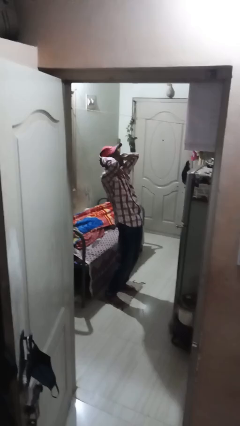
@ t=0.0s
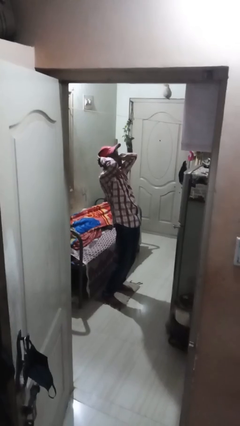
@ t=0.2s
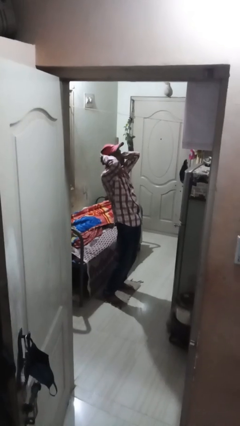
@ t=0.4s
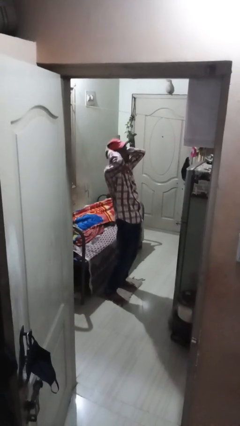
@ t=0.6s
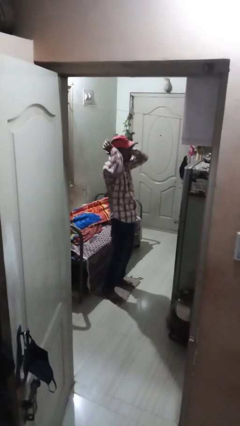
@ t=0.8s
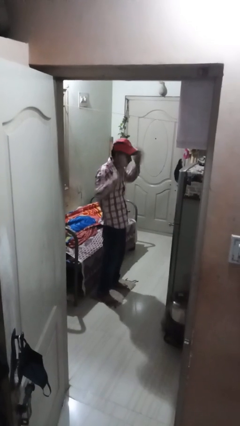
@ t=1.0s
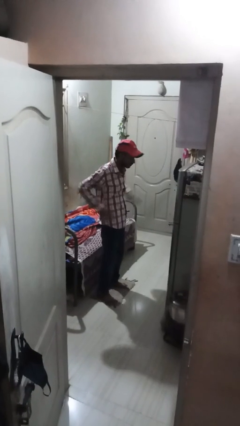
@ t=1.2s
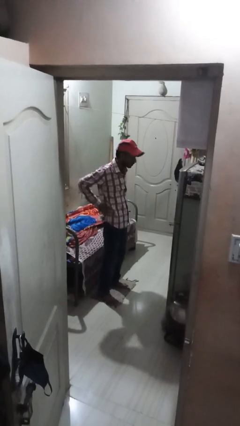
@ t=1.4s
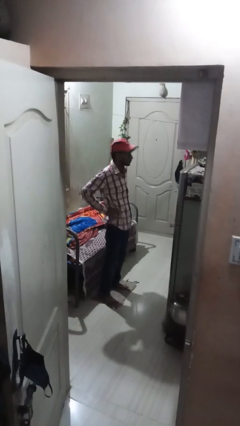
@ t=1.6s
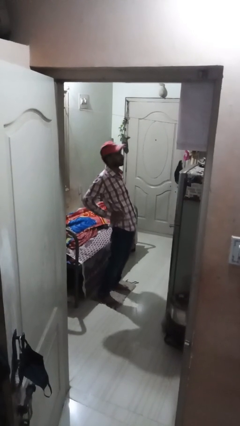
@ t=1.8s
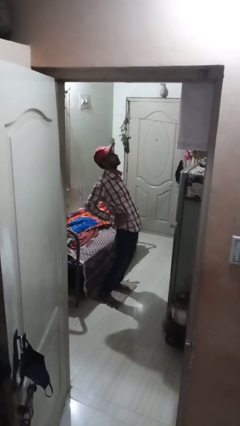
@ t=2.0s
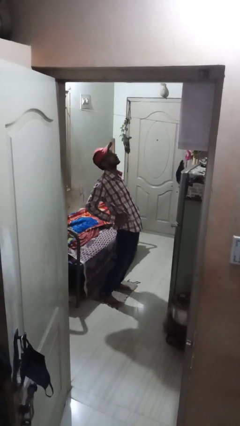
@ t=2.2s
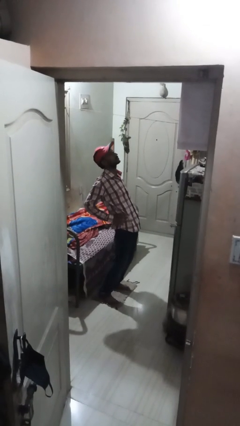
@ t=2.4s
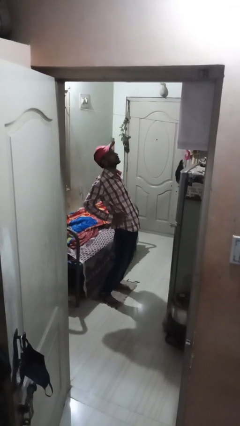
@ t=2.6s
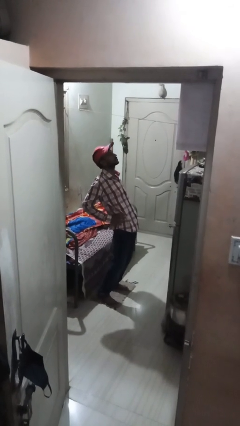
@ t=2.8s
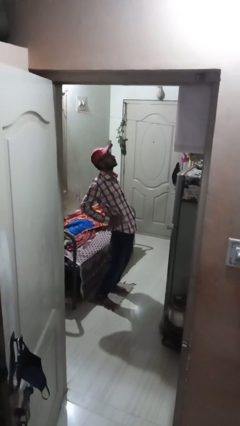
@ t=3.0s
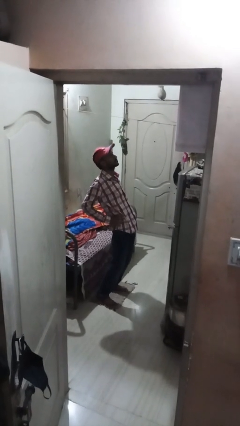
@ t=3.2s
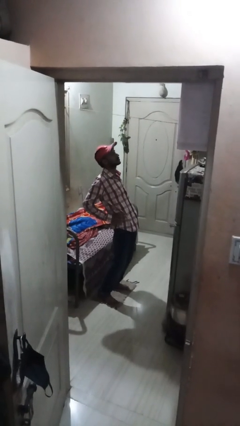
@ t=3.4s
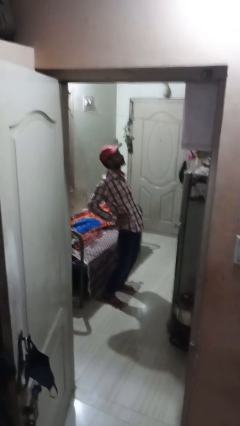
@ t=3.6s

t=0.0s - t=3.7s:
person stretches back

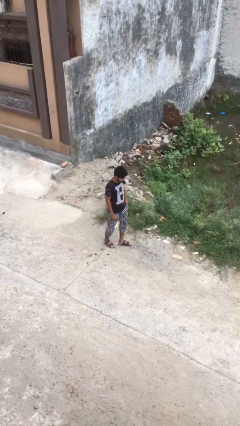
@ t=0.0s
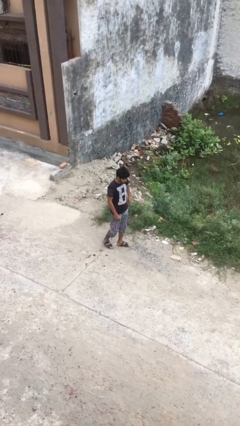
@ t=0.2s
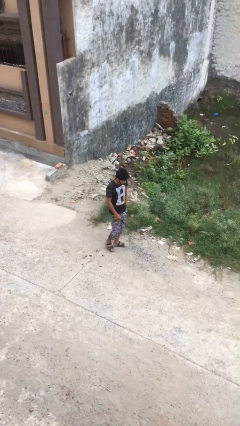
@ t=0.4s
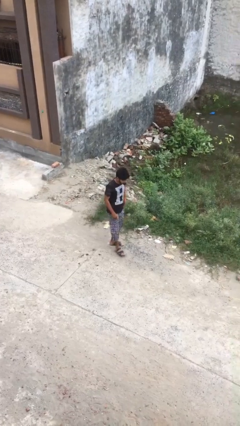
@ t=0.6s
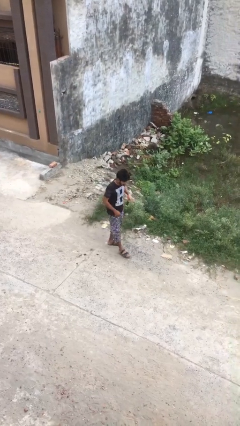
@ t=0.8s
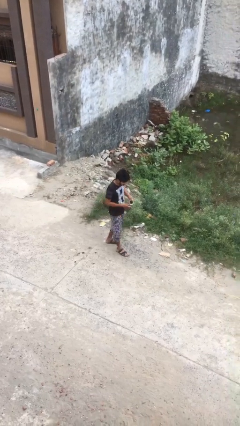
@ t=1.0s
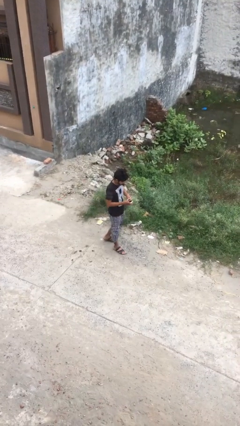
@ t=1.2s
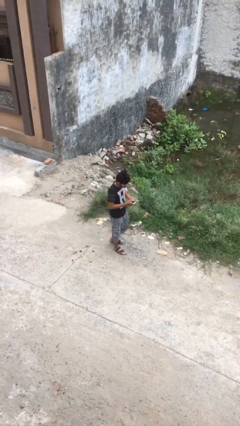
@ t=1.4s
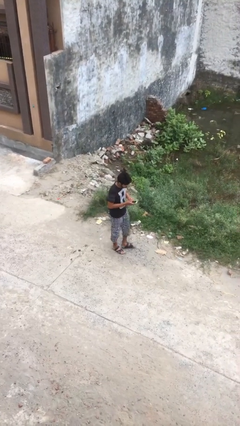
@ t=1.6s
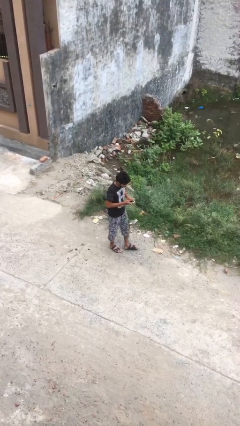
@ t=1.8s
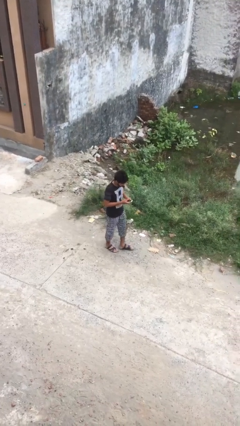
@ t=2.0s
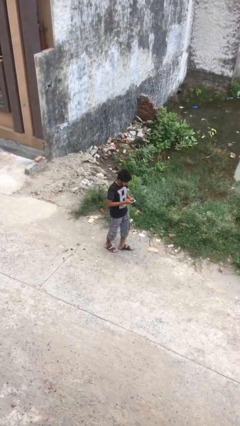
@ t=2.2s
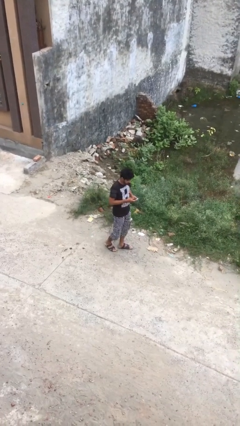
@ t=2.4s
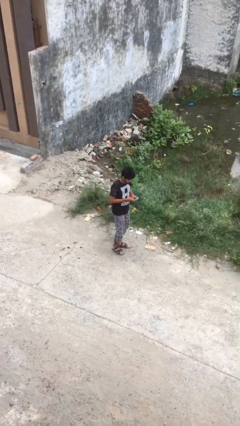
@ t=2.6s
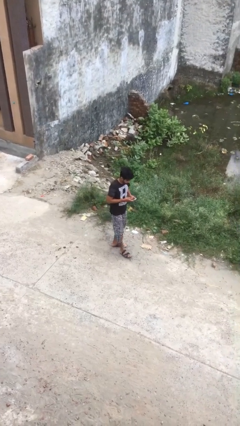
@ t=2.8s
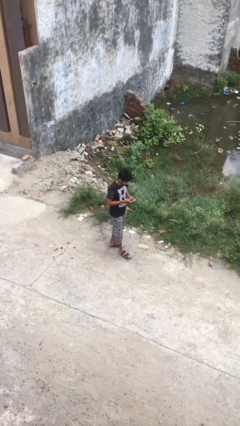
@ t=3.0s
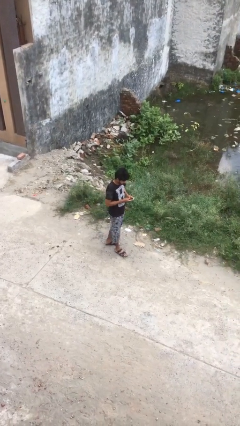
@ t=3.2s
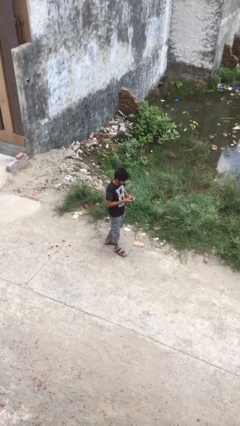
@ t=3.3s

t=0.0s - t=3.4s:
person texts on phone

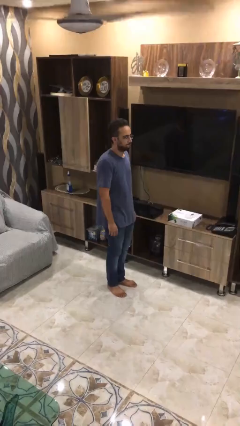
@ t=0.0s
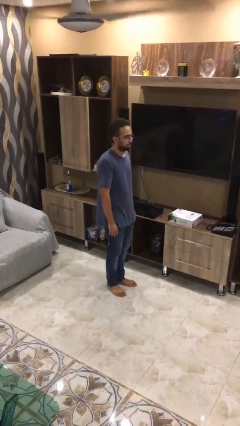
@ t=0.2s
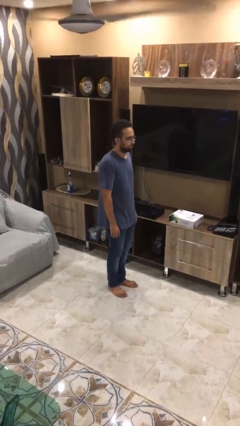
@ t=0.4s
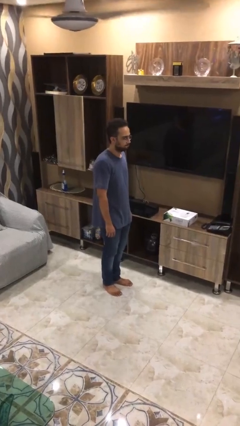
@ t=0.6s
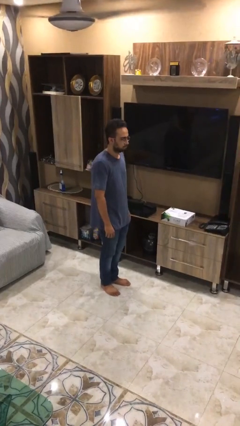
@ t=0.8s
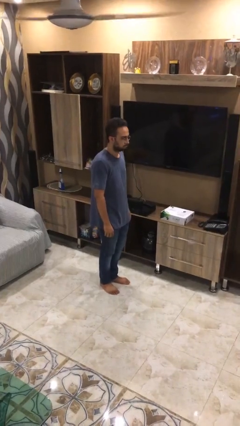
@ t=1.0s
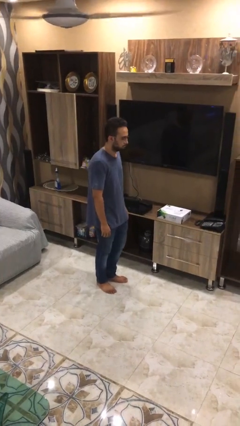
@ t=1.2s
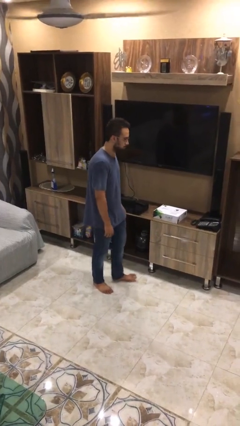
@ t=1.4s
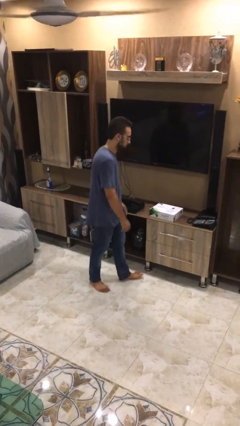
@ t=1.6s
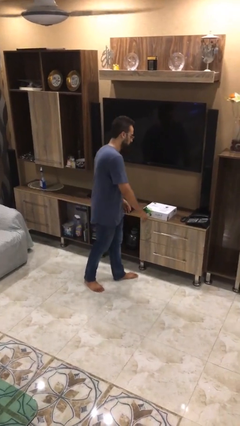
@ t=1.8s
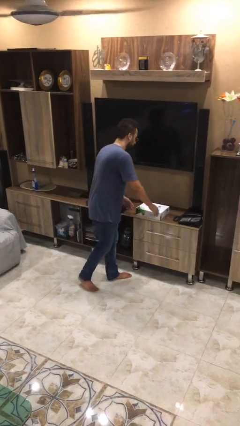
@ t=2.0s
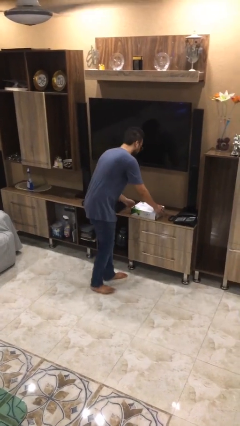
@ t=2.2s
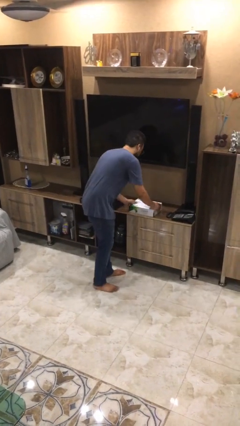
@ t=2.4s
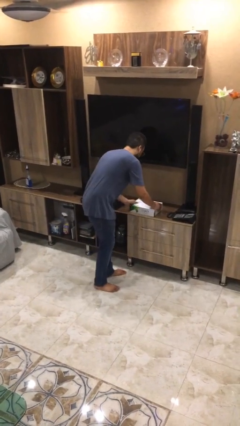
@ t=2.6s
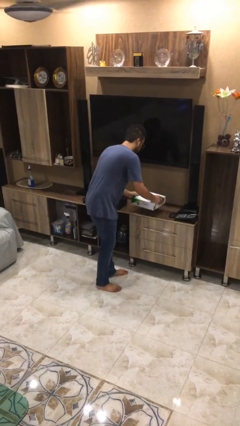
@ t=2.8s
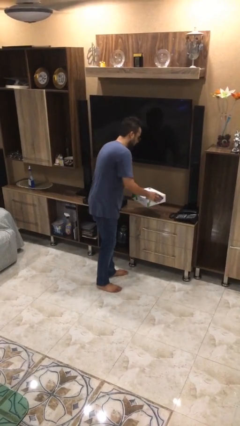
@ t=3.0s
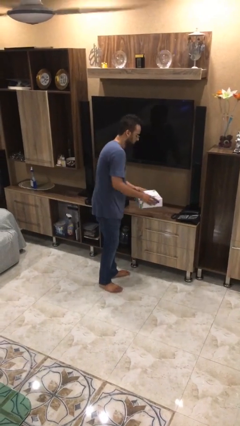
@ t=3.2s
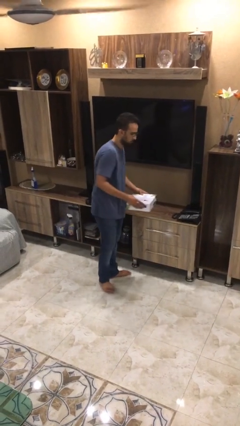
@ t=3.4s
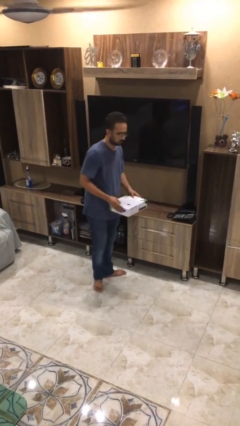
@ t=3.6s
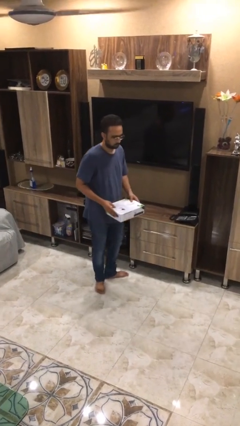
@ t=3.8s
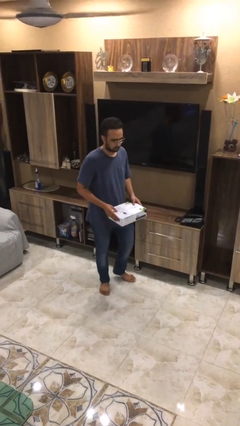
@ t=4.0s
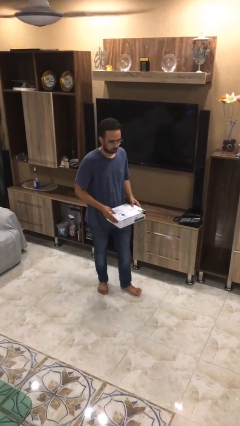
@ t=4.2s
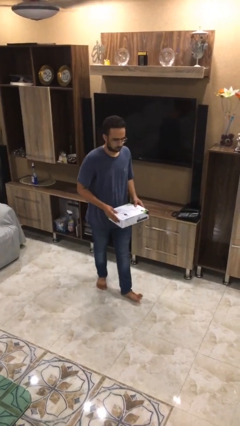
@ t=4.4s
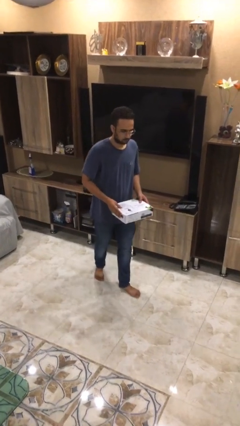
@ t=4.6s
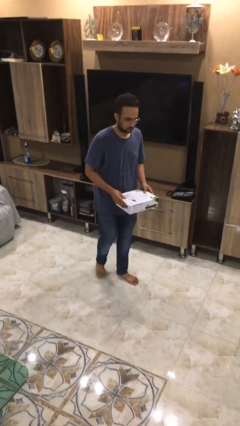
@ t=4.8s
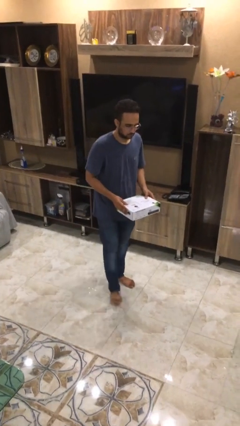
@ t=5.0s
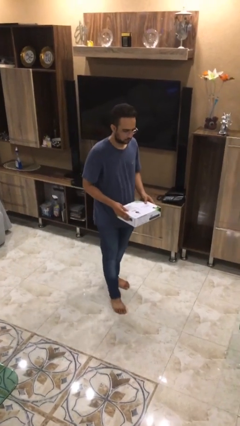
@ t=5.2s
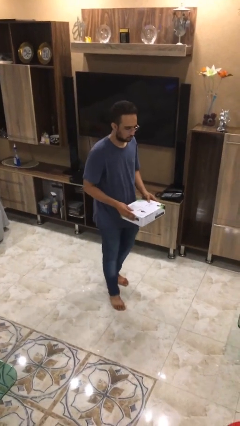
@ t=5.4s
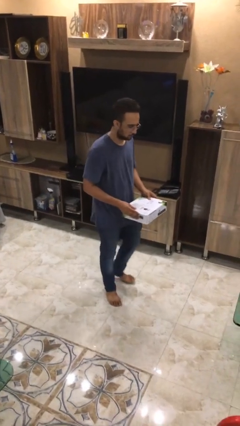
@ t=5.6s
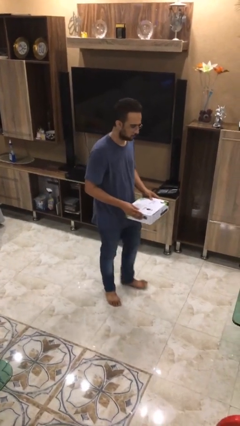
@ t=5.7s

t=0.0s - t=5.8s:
person picks up object from table

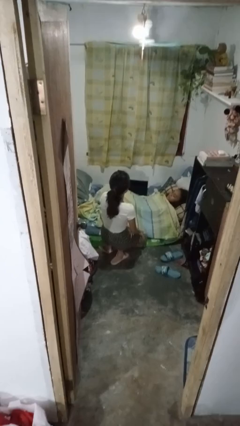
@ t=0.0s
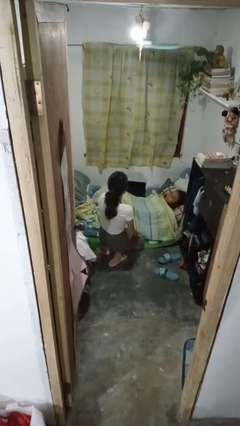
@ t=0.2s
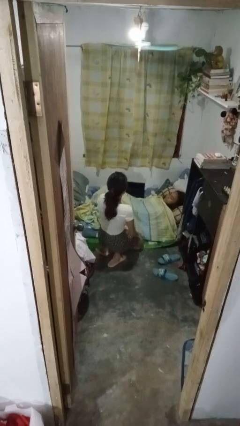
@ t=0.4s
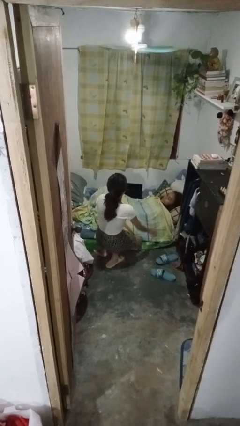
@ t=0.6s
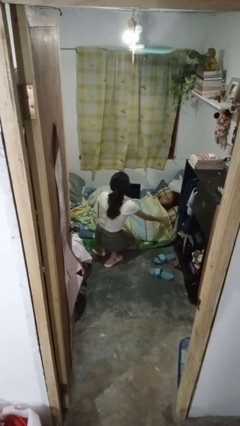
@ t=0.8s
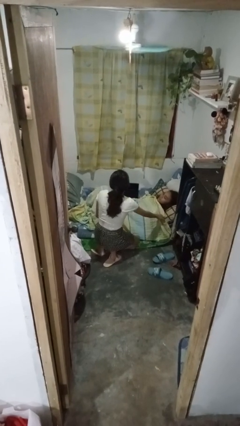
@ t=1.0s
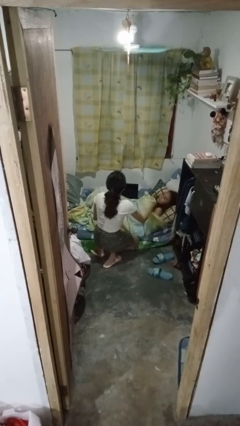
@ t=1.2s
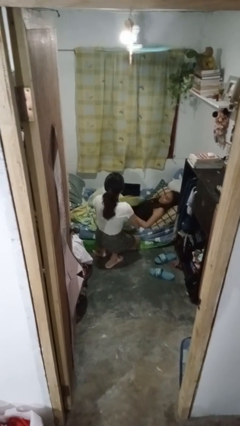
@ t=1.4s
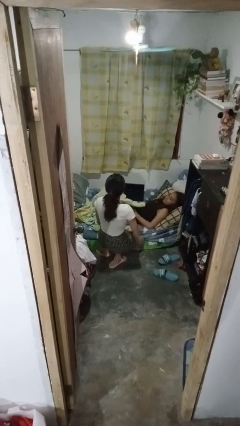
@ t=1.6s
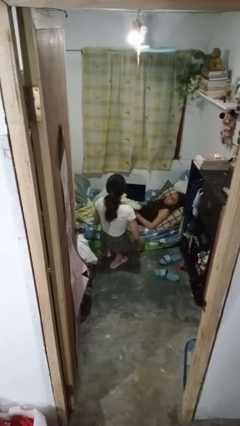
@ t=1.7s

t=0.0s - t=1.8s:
person uncovers friend with blanket

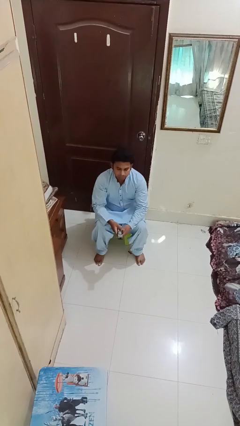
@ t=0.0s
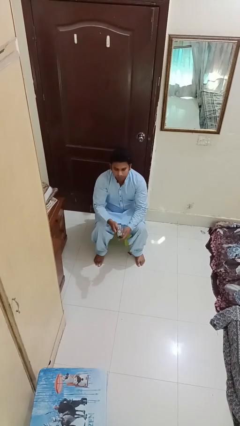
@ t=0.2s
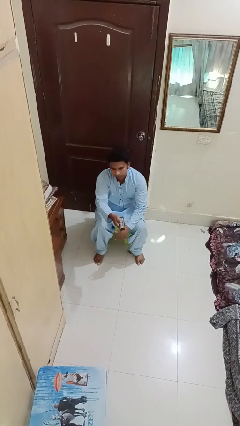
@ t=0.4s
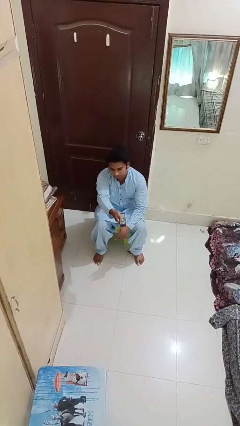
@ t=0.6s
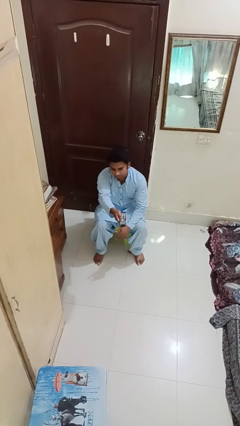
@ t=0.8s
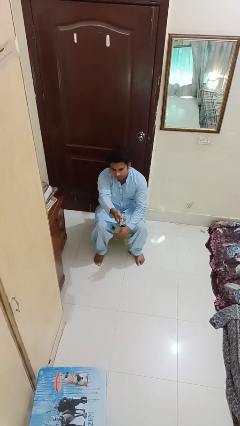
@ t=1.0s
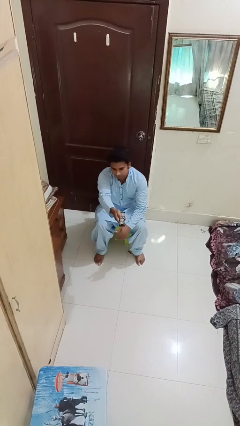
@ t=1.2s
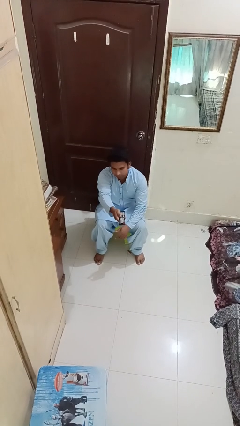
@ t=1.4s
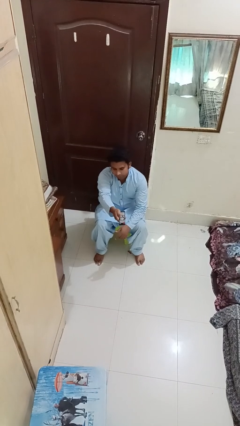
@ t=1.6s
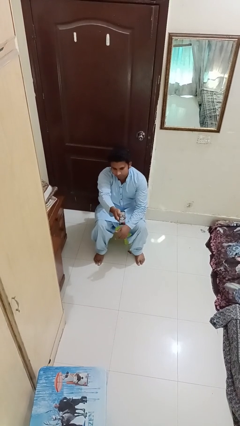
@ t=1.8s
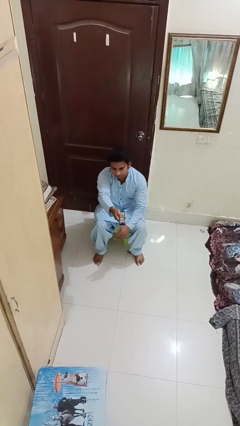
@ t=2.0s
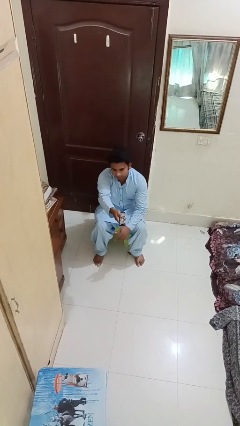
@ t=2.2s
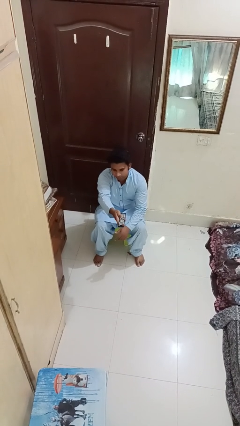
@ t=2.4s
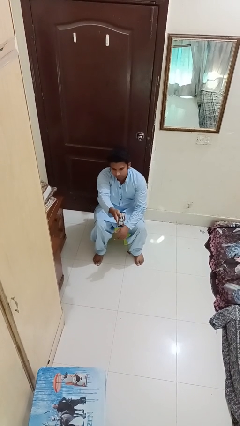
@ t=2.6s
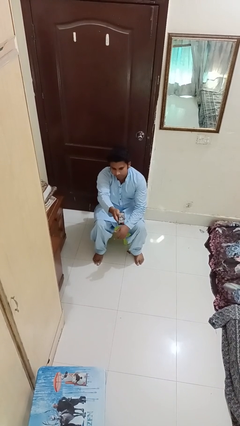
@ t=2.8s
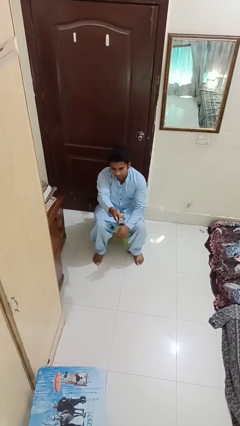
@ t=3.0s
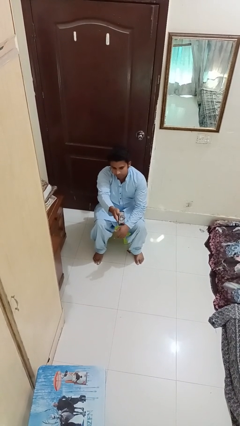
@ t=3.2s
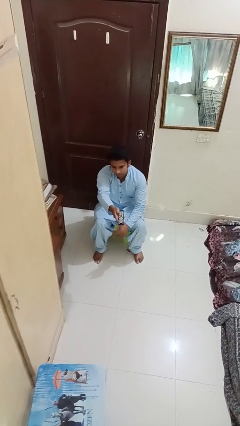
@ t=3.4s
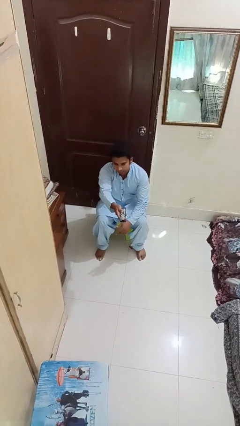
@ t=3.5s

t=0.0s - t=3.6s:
person uses television remote
